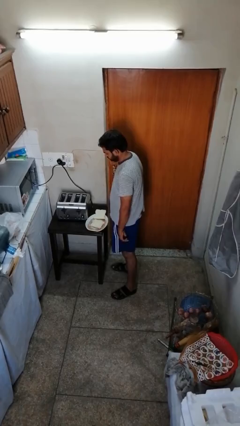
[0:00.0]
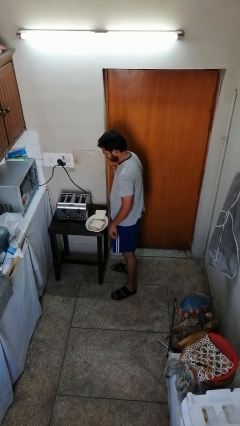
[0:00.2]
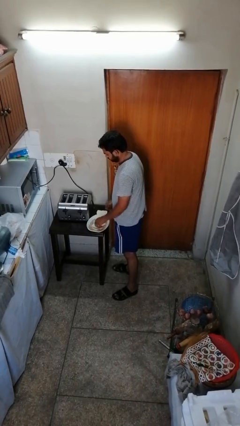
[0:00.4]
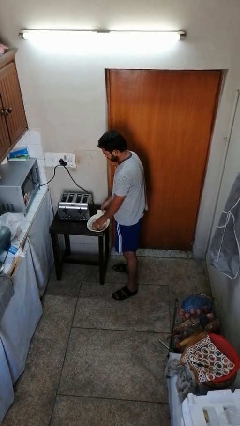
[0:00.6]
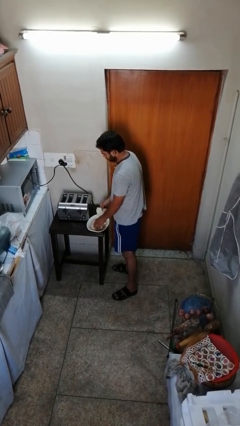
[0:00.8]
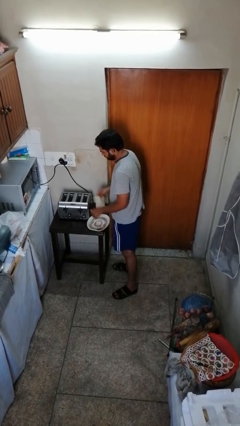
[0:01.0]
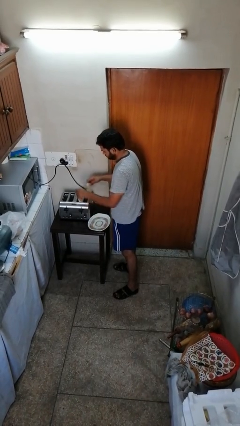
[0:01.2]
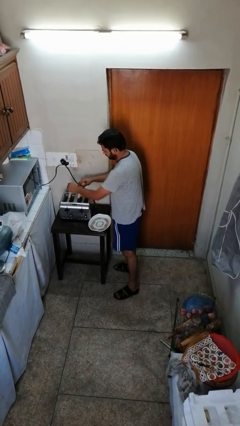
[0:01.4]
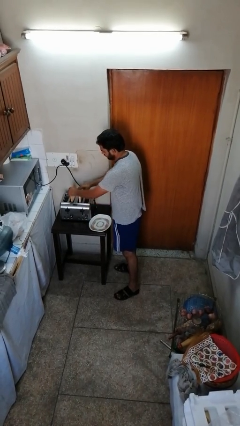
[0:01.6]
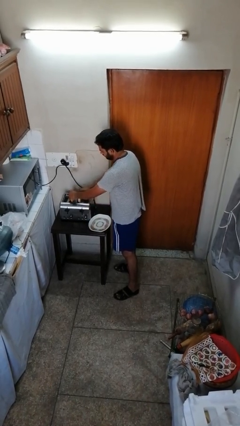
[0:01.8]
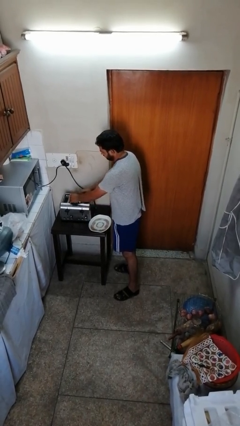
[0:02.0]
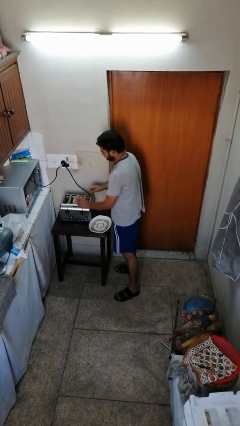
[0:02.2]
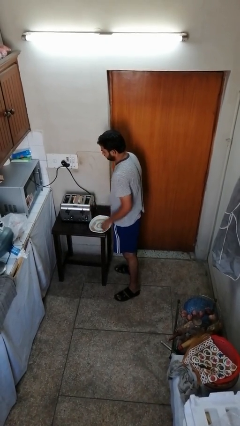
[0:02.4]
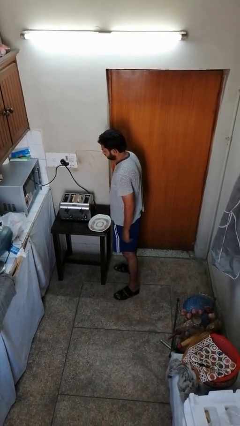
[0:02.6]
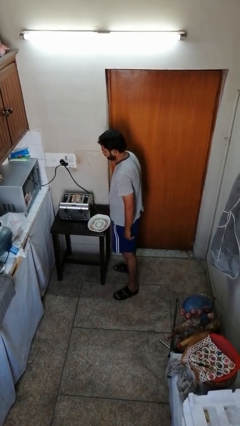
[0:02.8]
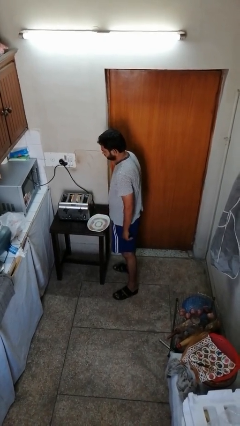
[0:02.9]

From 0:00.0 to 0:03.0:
person puts object into toaster

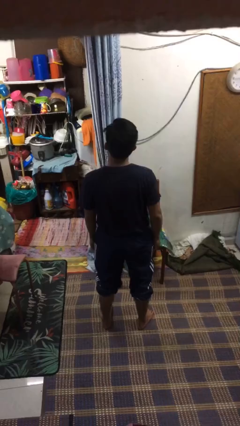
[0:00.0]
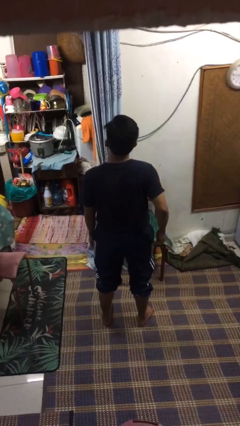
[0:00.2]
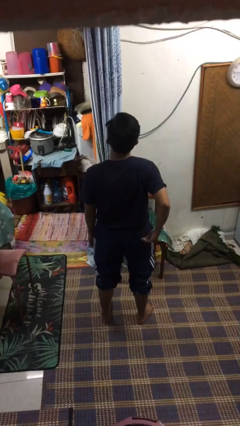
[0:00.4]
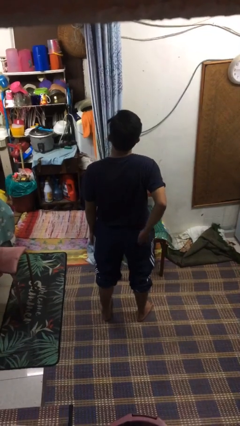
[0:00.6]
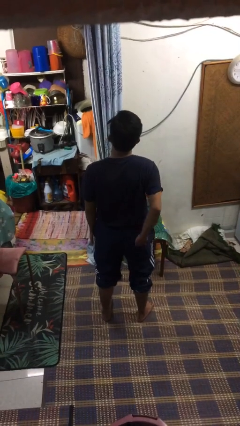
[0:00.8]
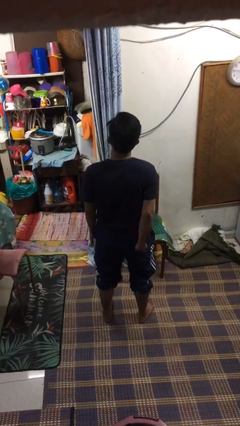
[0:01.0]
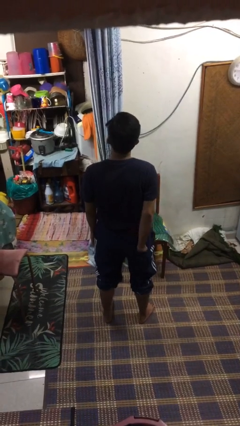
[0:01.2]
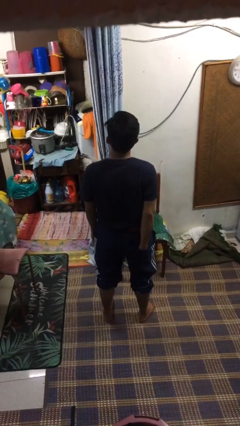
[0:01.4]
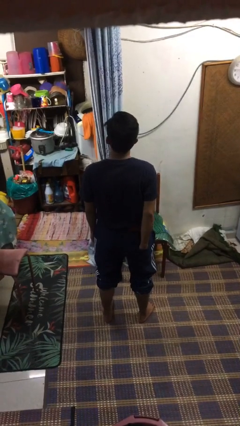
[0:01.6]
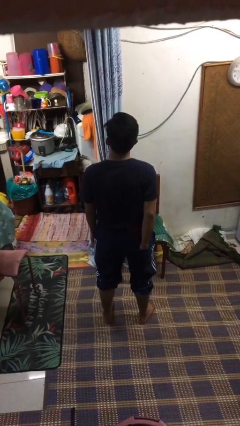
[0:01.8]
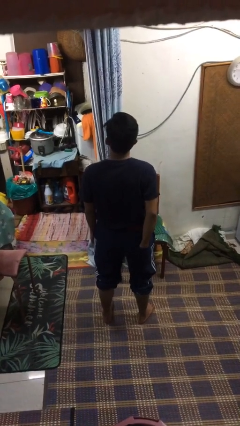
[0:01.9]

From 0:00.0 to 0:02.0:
person puts hands in back pockets

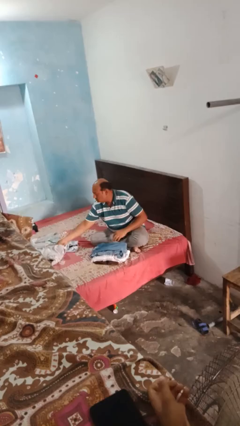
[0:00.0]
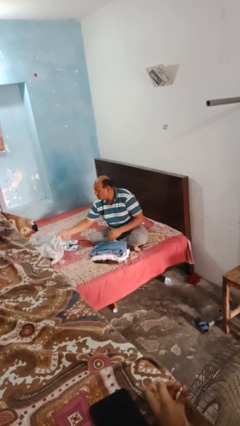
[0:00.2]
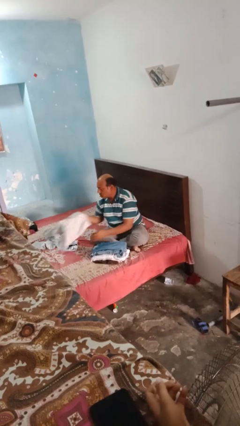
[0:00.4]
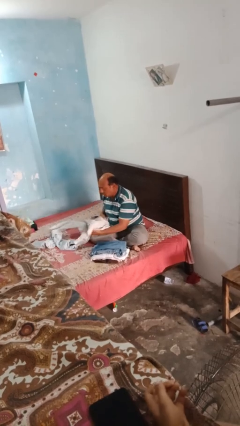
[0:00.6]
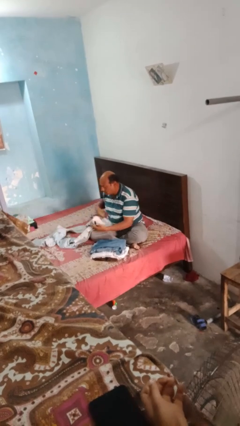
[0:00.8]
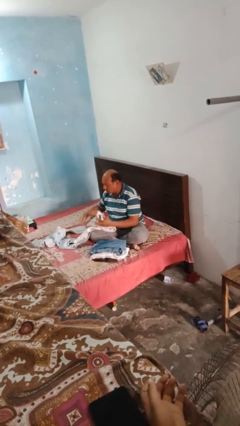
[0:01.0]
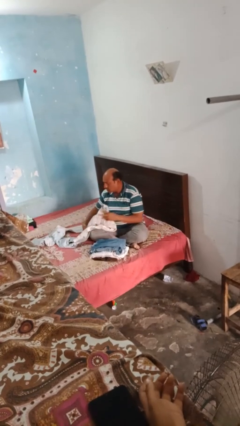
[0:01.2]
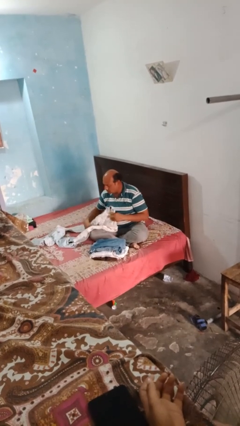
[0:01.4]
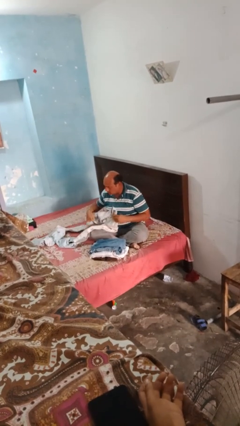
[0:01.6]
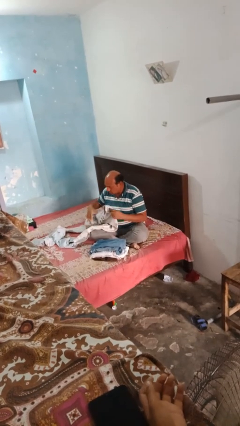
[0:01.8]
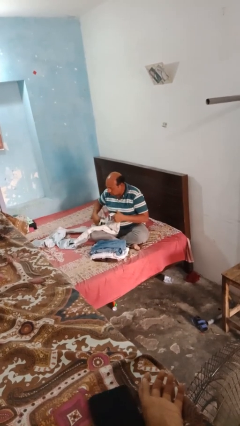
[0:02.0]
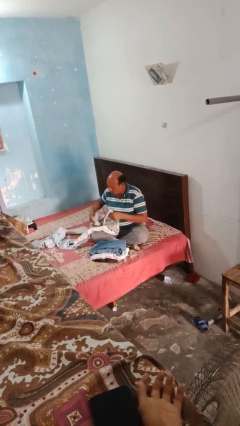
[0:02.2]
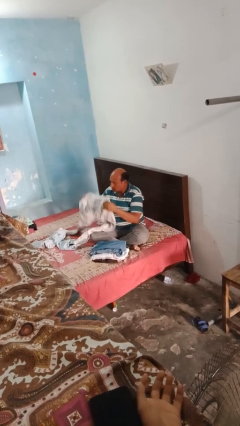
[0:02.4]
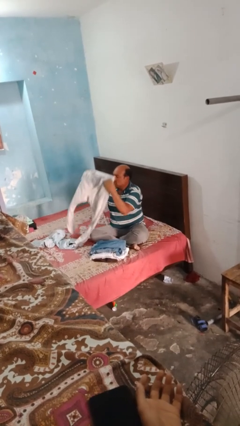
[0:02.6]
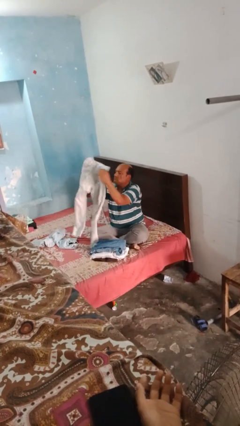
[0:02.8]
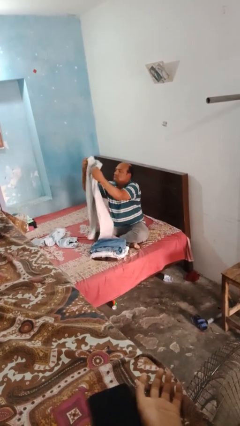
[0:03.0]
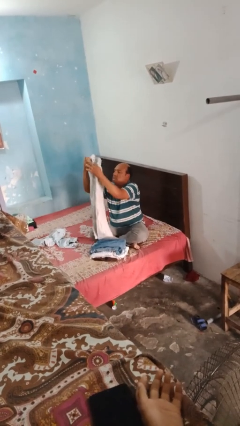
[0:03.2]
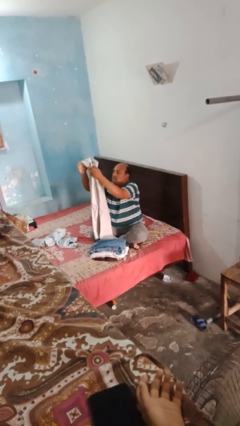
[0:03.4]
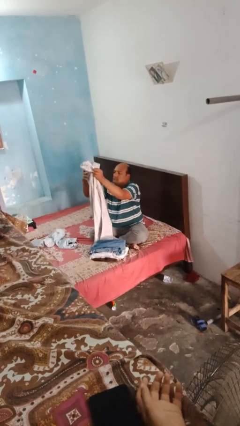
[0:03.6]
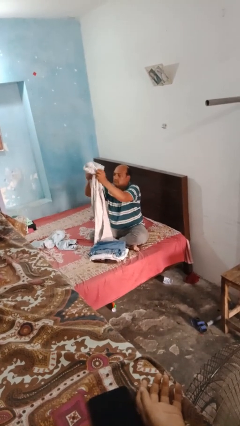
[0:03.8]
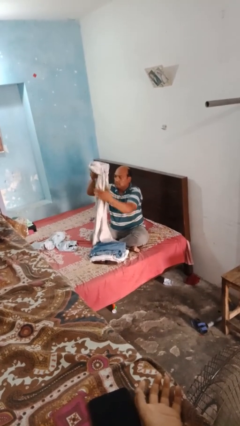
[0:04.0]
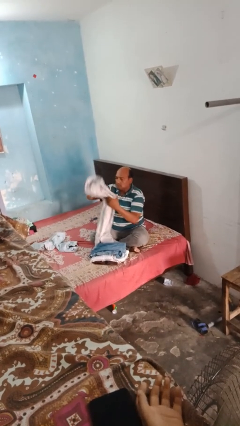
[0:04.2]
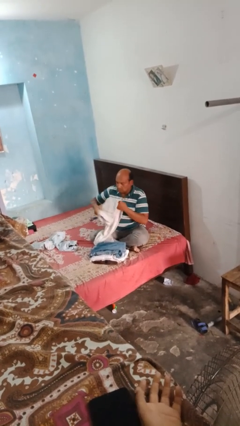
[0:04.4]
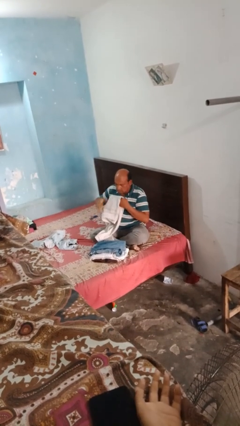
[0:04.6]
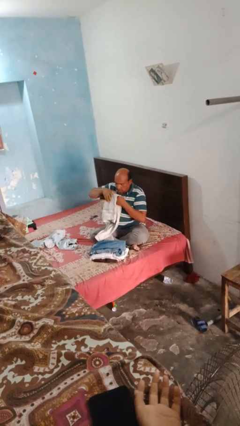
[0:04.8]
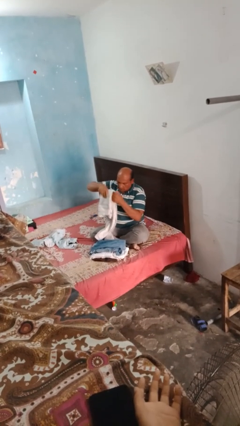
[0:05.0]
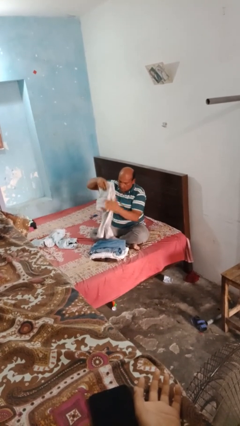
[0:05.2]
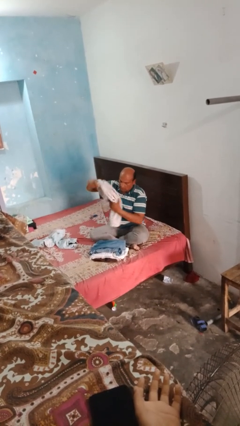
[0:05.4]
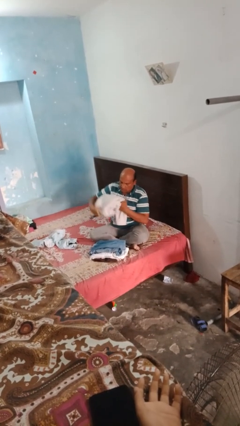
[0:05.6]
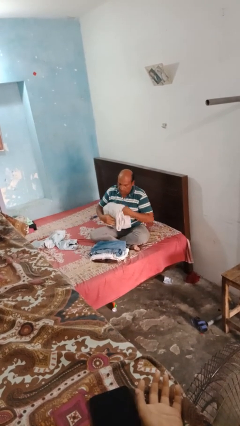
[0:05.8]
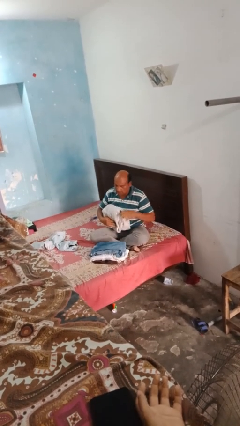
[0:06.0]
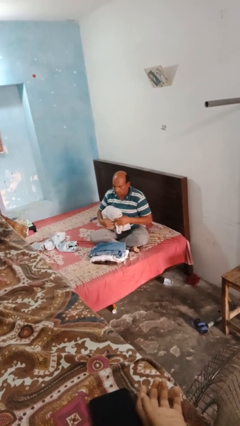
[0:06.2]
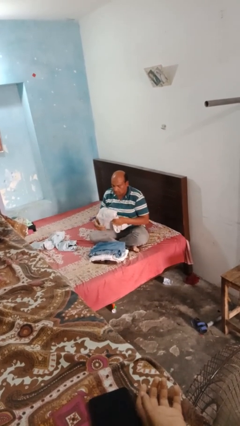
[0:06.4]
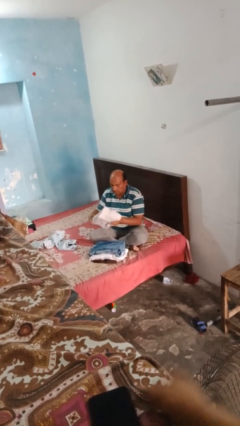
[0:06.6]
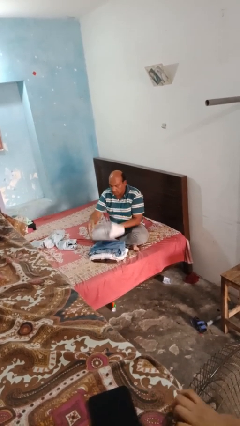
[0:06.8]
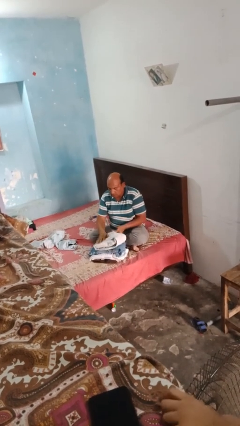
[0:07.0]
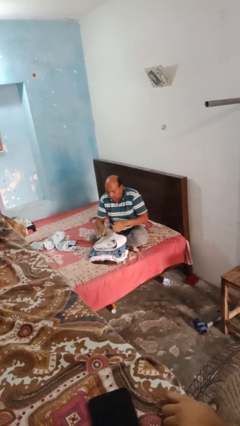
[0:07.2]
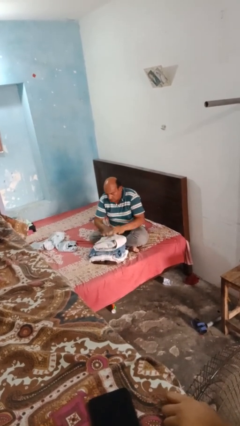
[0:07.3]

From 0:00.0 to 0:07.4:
person folds pants

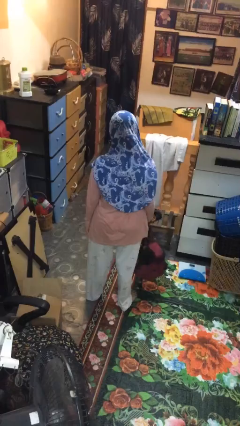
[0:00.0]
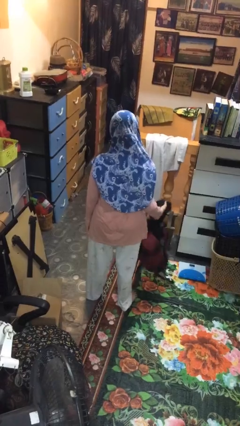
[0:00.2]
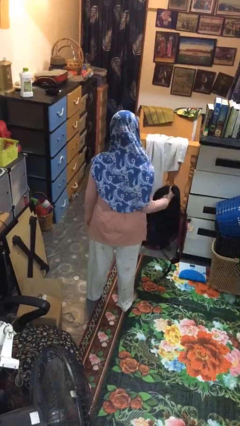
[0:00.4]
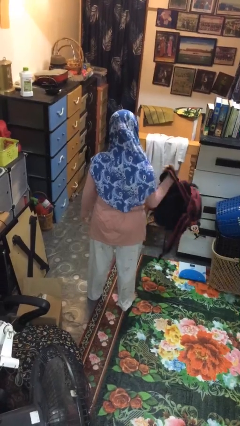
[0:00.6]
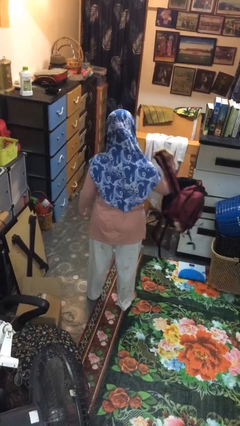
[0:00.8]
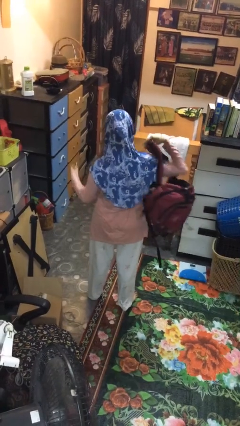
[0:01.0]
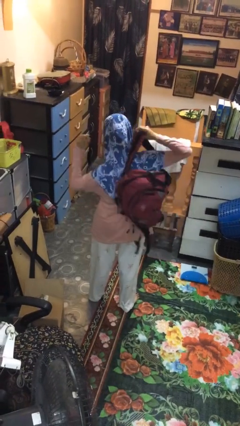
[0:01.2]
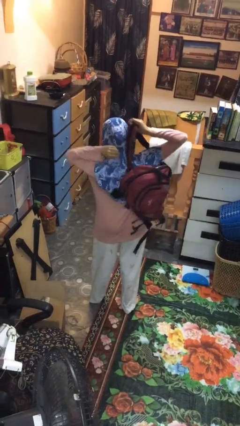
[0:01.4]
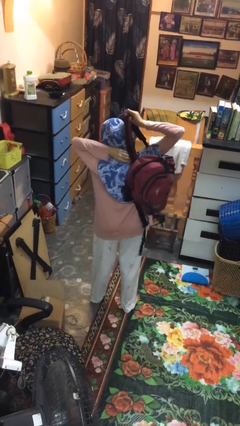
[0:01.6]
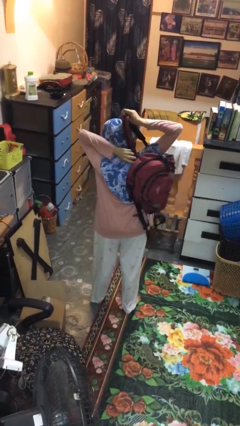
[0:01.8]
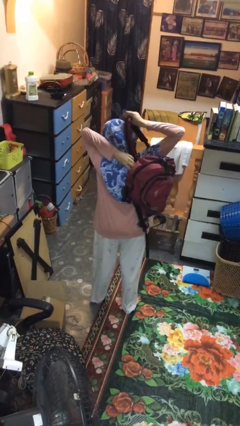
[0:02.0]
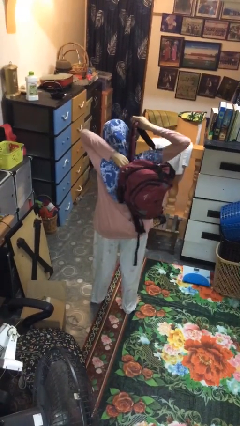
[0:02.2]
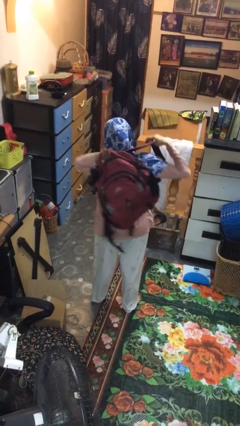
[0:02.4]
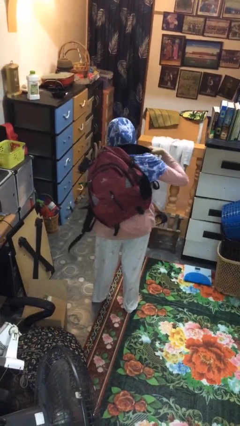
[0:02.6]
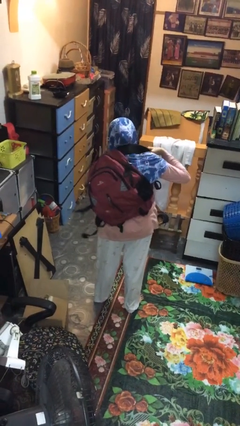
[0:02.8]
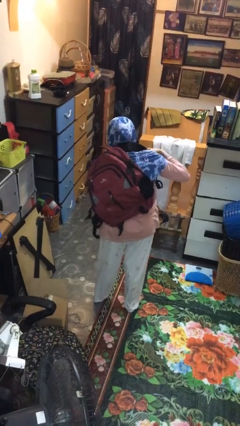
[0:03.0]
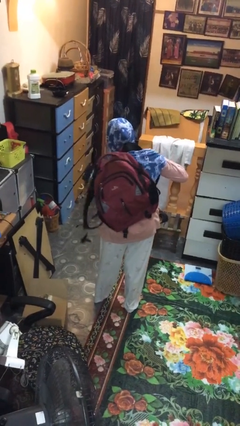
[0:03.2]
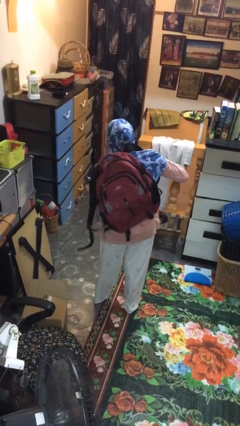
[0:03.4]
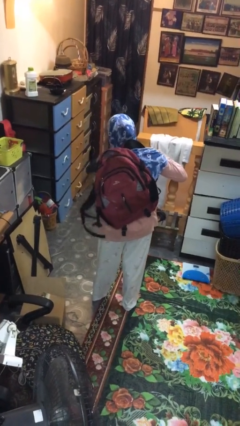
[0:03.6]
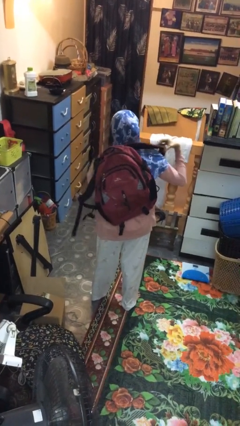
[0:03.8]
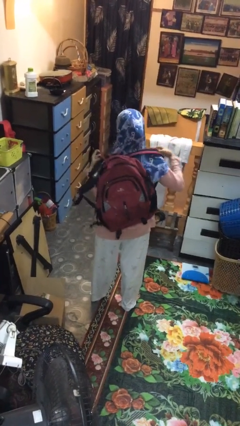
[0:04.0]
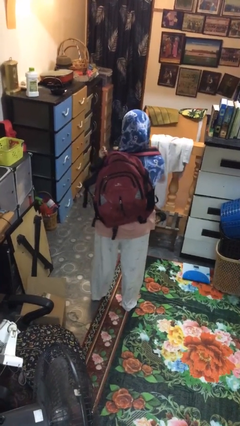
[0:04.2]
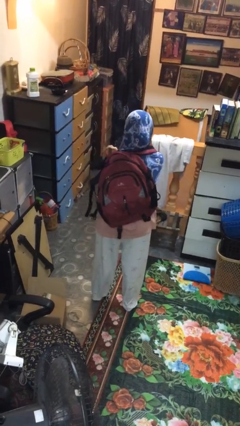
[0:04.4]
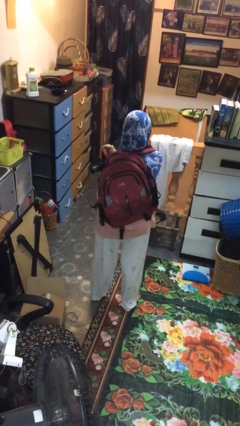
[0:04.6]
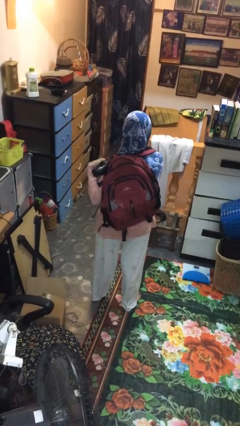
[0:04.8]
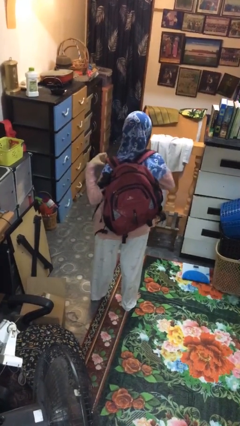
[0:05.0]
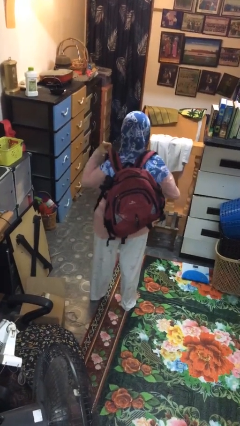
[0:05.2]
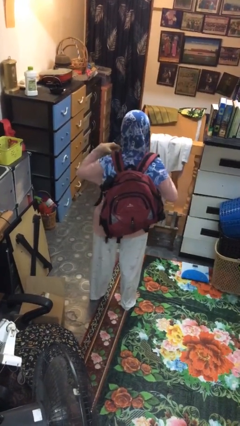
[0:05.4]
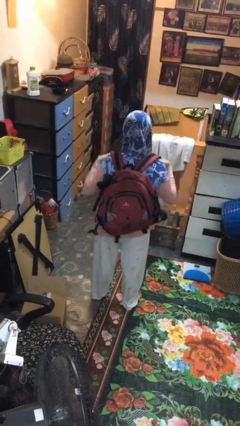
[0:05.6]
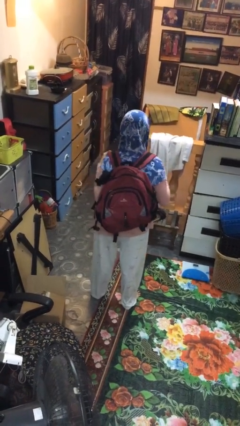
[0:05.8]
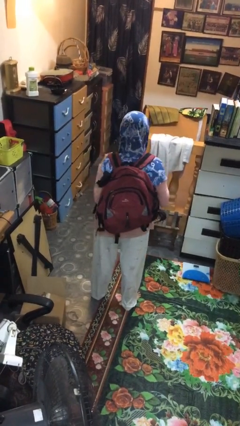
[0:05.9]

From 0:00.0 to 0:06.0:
person puts on backpack
